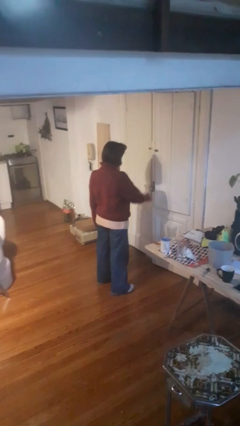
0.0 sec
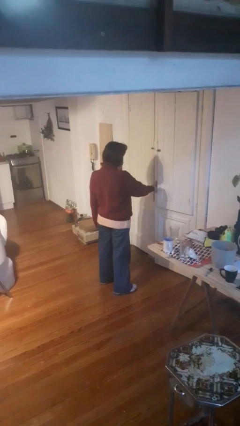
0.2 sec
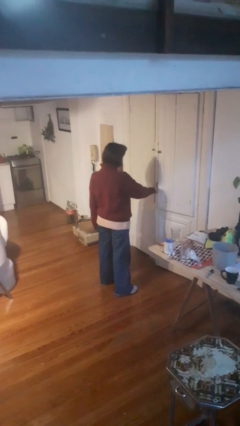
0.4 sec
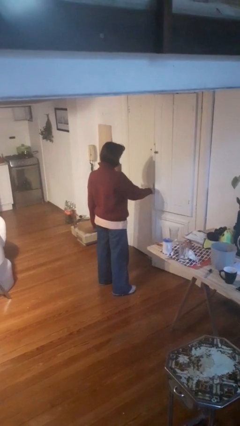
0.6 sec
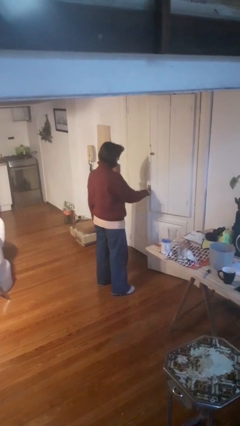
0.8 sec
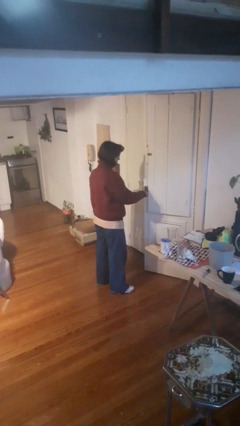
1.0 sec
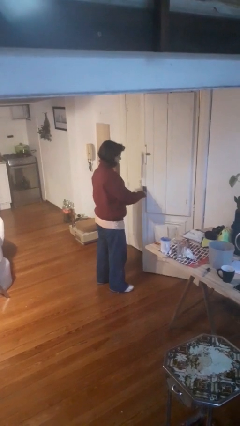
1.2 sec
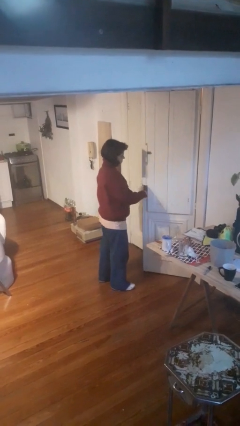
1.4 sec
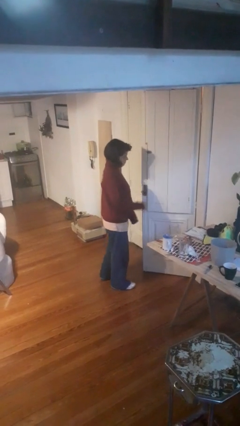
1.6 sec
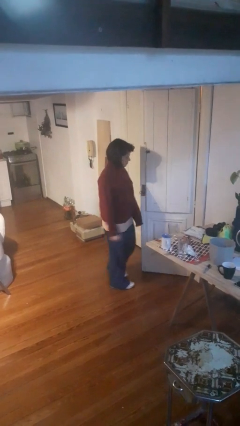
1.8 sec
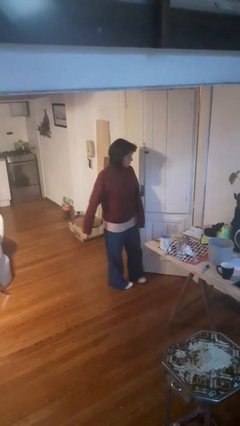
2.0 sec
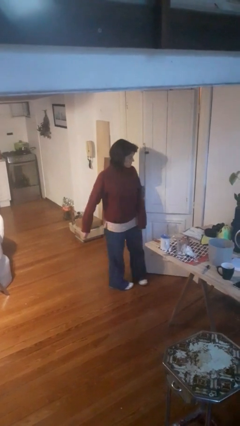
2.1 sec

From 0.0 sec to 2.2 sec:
person opens facility door

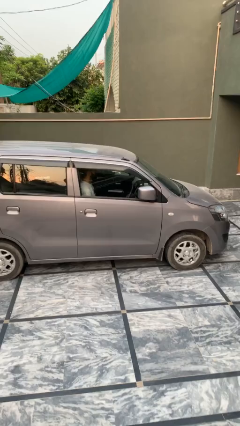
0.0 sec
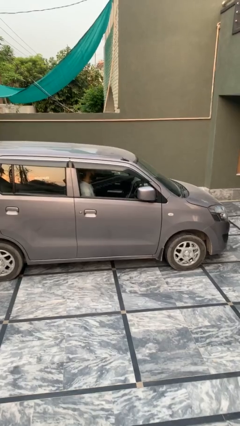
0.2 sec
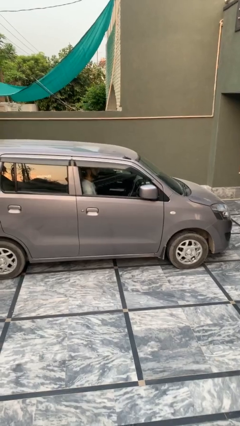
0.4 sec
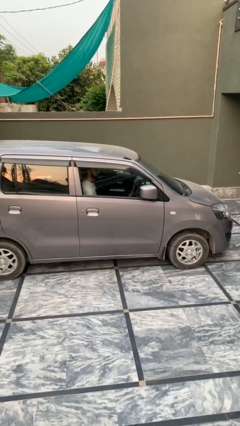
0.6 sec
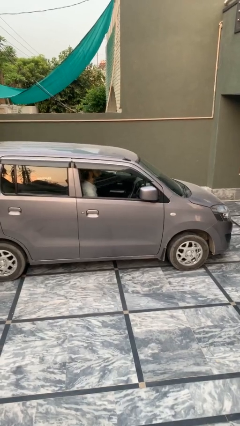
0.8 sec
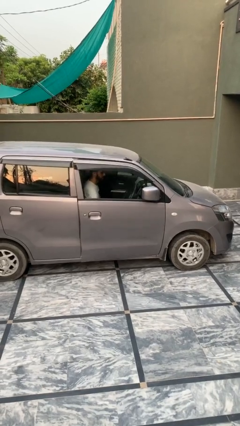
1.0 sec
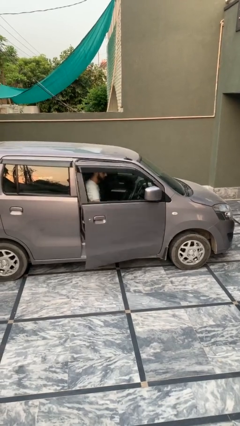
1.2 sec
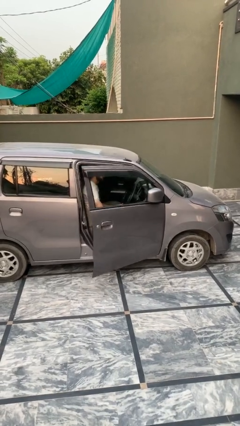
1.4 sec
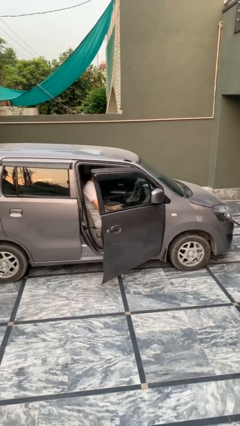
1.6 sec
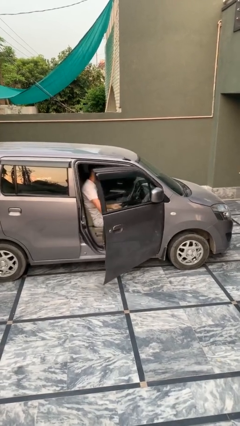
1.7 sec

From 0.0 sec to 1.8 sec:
person opens car door

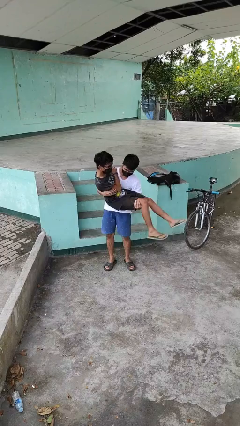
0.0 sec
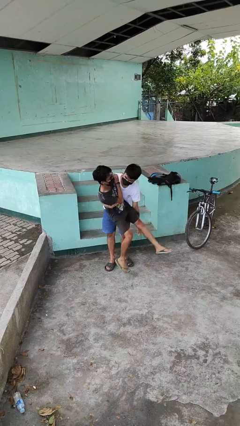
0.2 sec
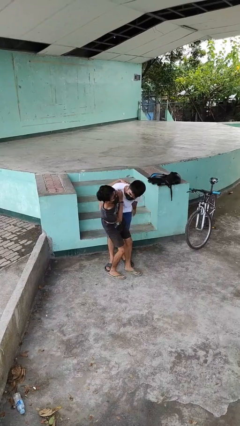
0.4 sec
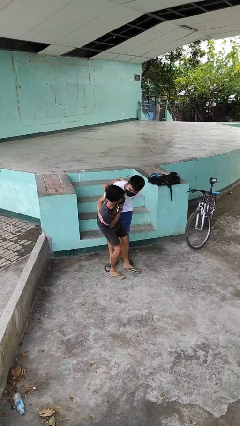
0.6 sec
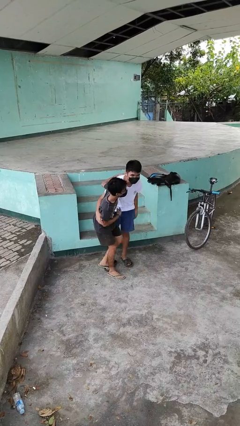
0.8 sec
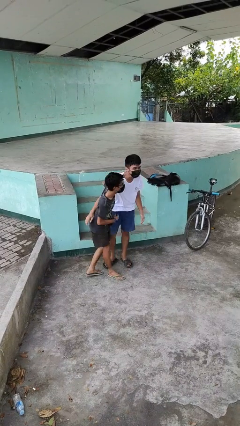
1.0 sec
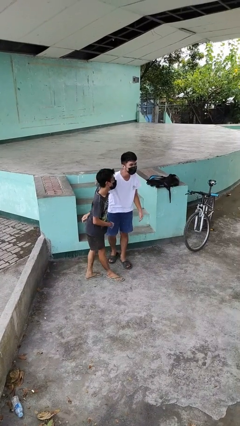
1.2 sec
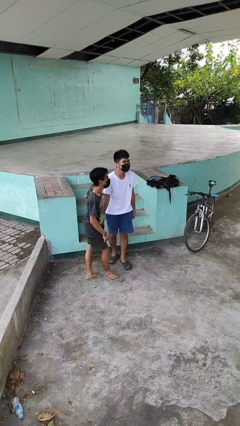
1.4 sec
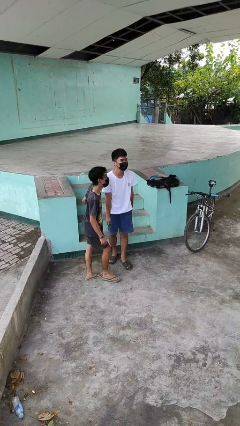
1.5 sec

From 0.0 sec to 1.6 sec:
person puts down person

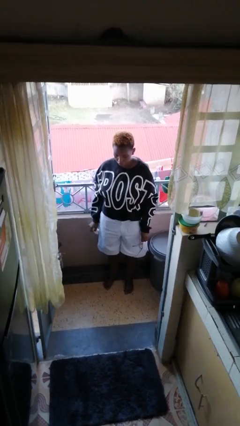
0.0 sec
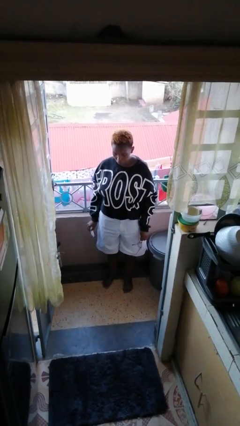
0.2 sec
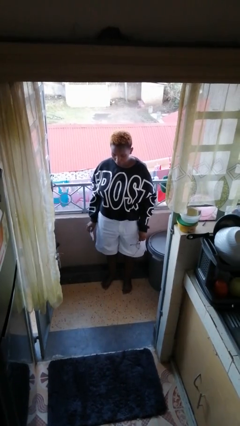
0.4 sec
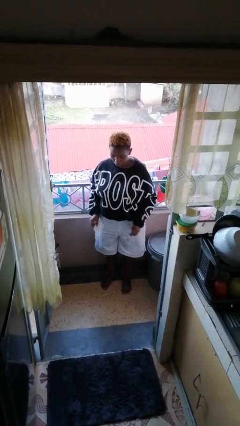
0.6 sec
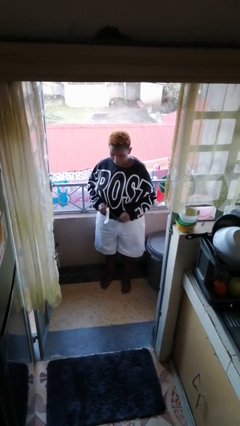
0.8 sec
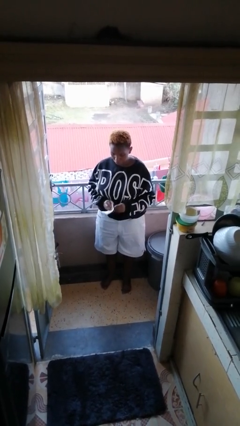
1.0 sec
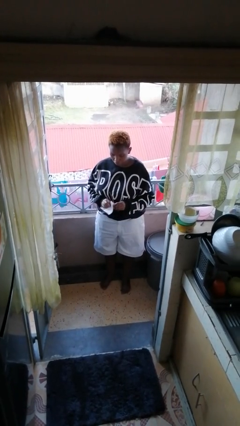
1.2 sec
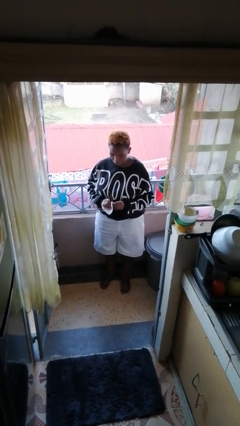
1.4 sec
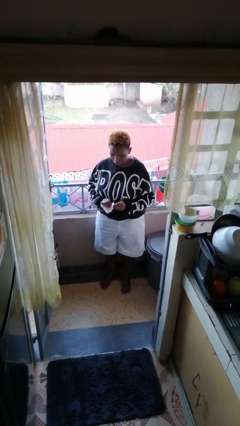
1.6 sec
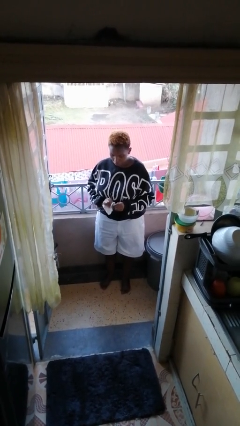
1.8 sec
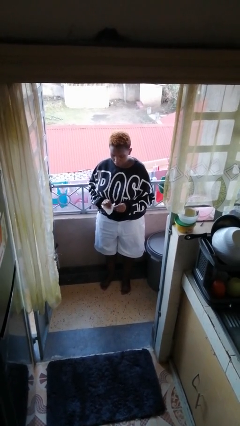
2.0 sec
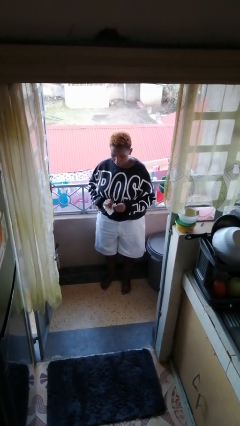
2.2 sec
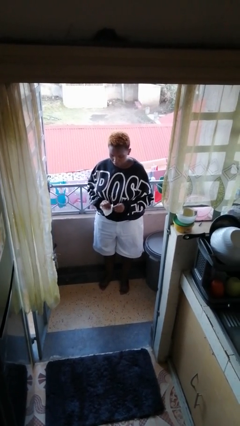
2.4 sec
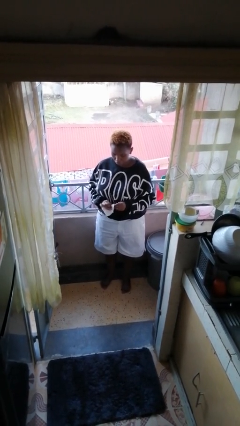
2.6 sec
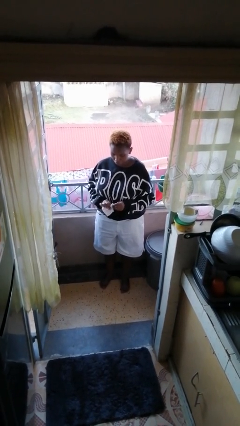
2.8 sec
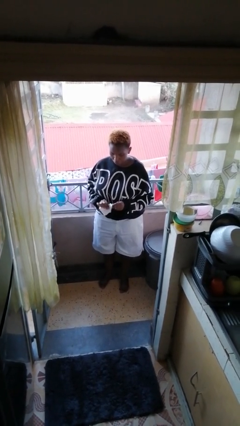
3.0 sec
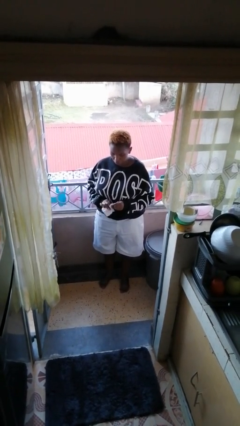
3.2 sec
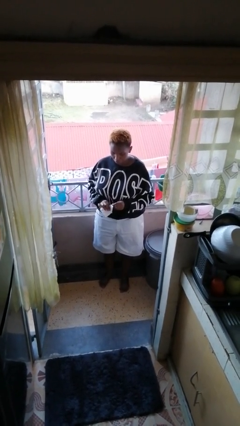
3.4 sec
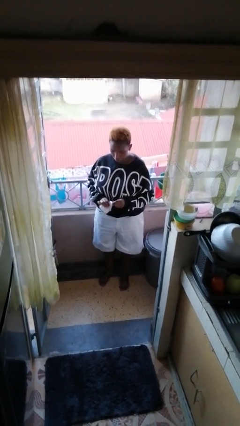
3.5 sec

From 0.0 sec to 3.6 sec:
person cleans eyeglasses

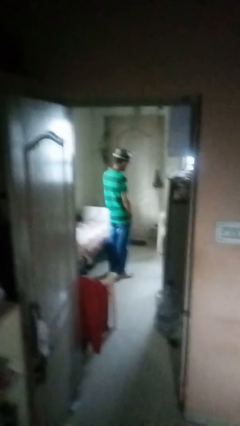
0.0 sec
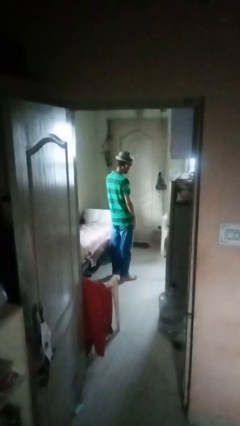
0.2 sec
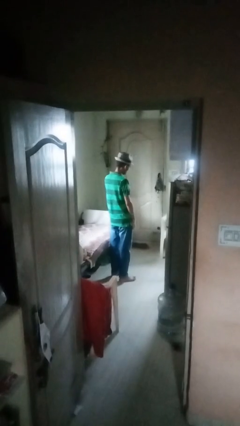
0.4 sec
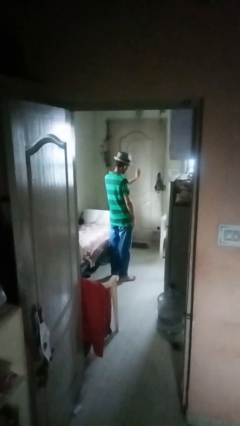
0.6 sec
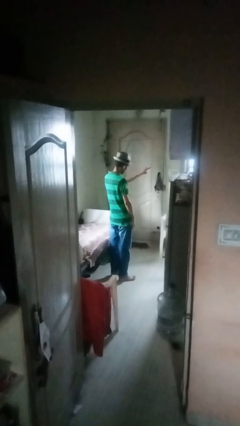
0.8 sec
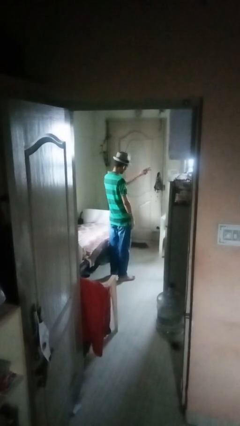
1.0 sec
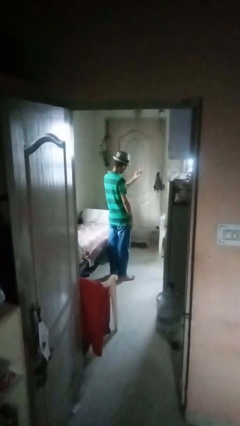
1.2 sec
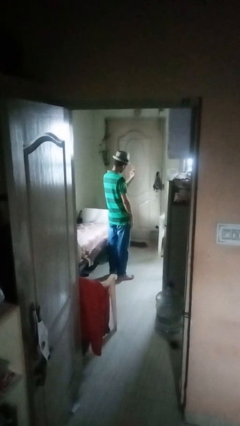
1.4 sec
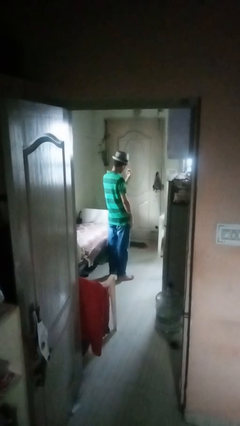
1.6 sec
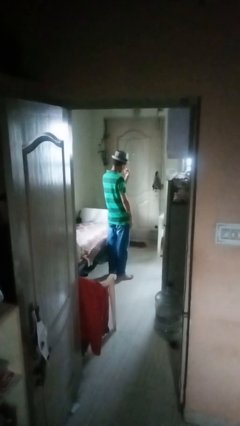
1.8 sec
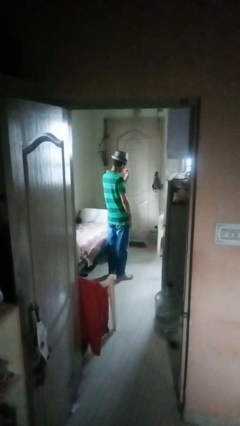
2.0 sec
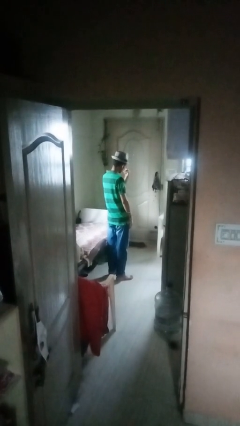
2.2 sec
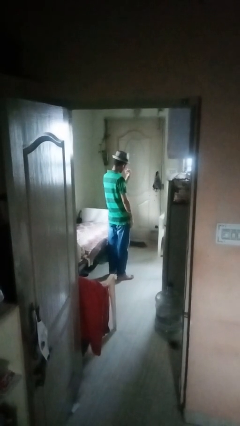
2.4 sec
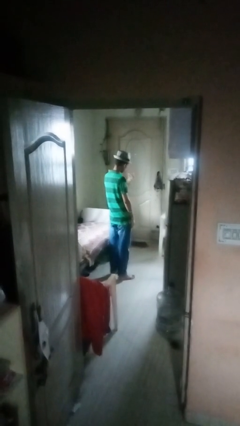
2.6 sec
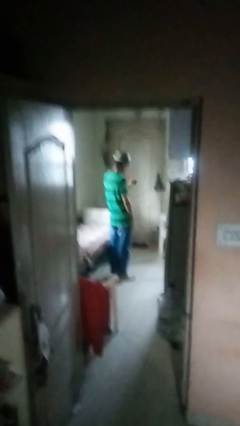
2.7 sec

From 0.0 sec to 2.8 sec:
person gestures watch closely

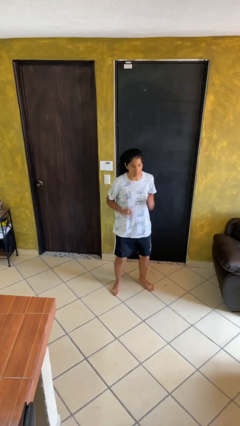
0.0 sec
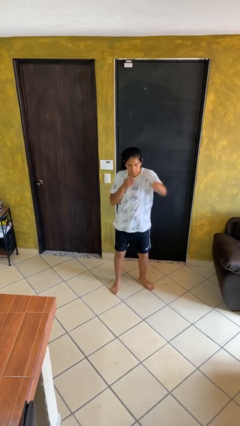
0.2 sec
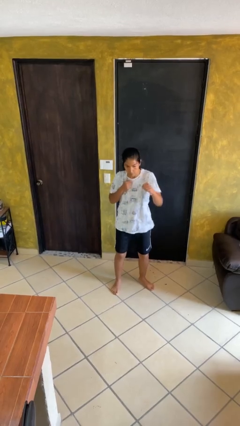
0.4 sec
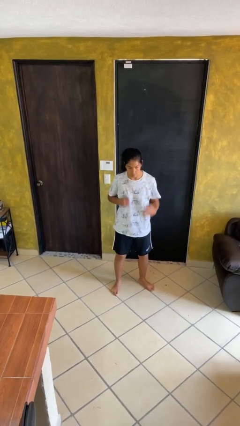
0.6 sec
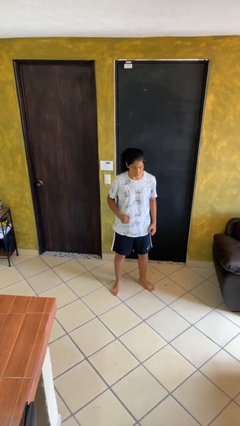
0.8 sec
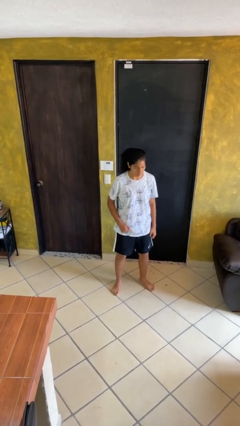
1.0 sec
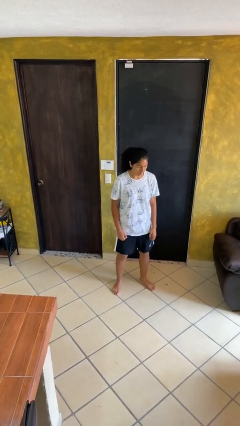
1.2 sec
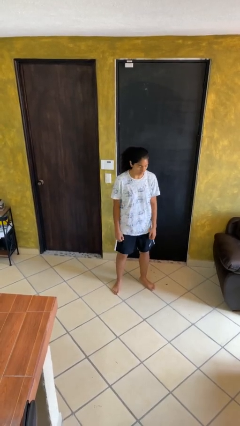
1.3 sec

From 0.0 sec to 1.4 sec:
person punches

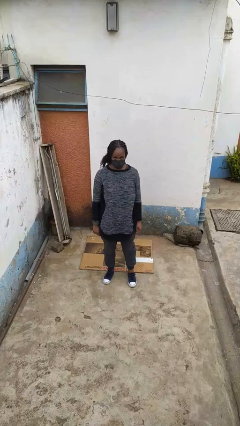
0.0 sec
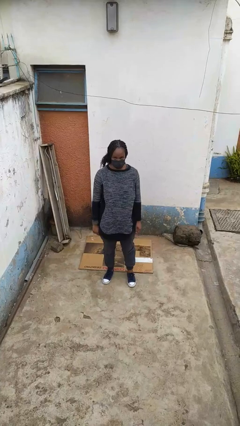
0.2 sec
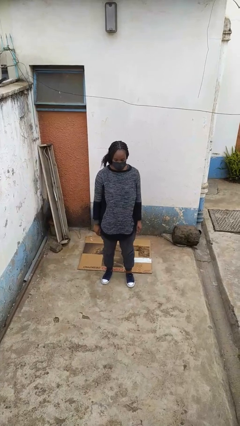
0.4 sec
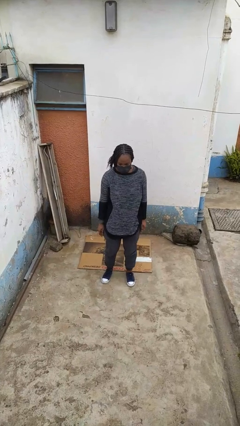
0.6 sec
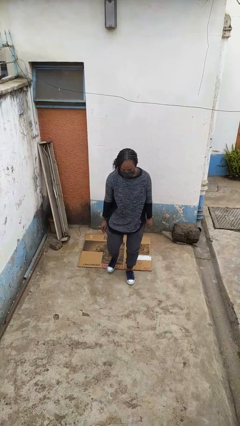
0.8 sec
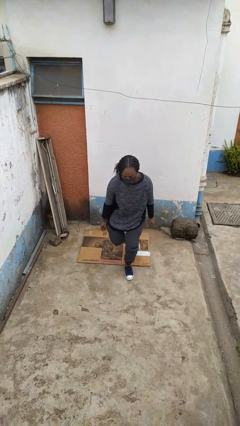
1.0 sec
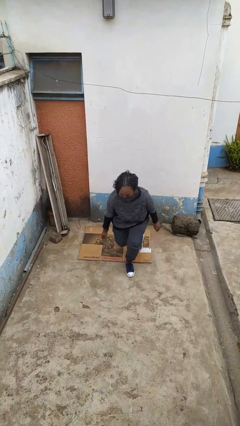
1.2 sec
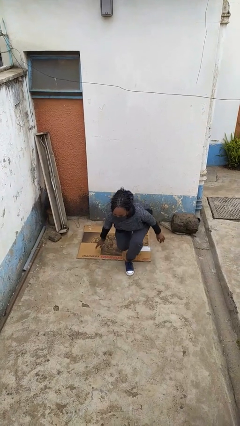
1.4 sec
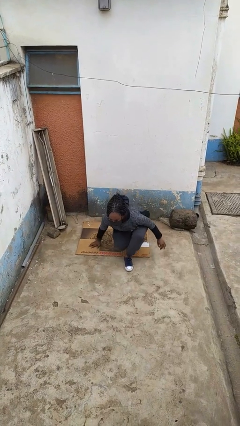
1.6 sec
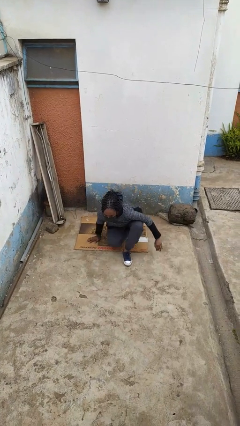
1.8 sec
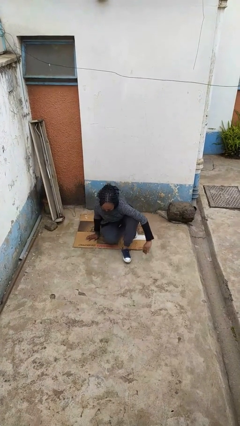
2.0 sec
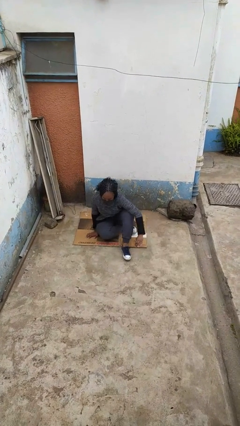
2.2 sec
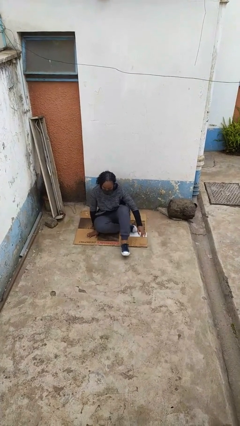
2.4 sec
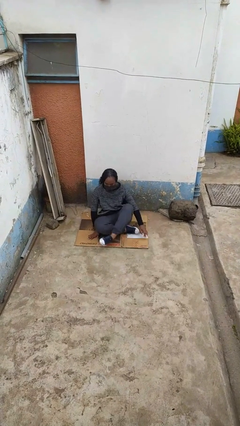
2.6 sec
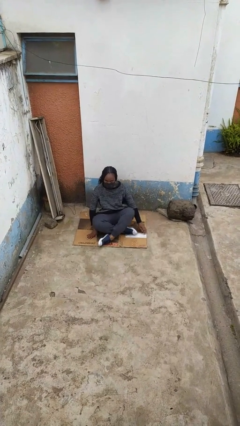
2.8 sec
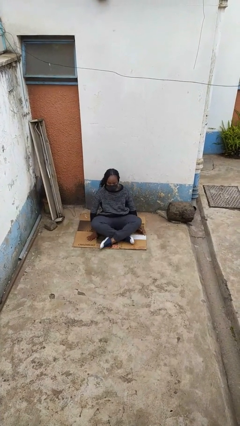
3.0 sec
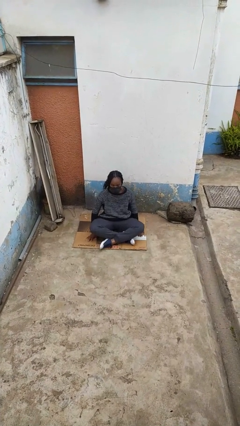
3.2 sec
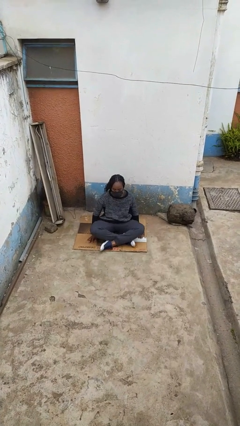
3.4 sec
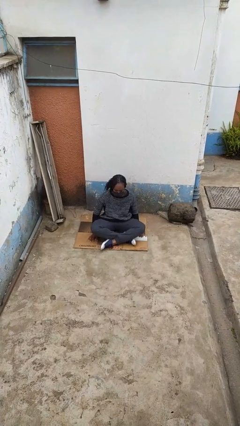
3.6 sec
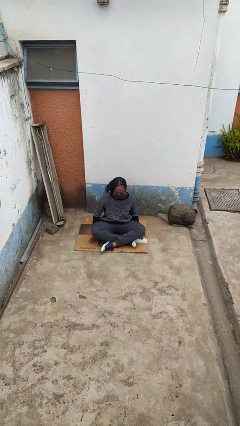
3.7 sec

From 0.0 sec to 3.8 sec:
person sits crisscross
